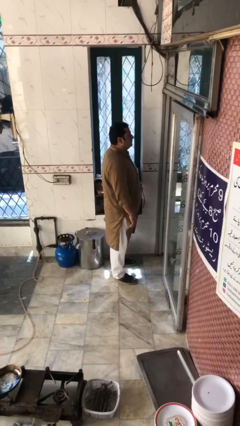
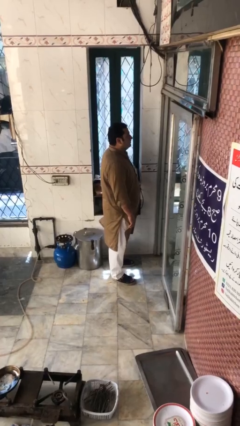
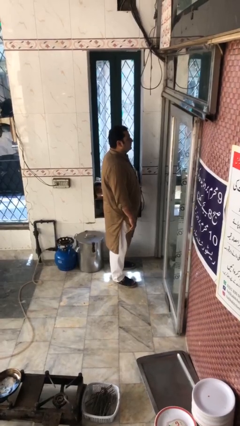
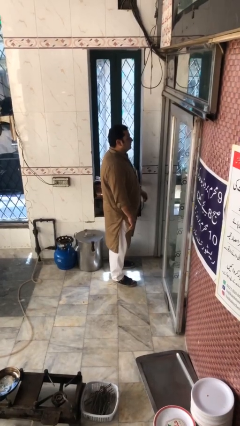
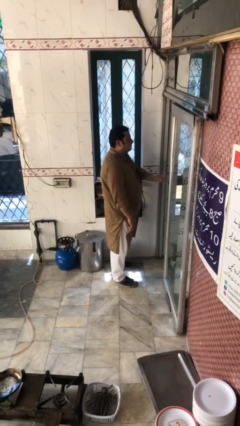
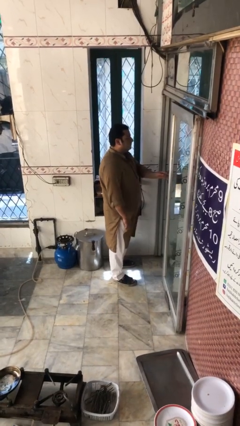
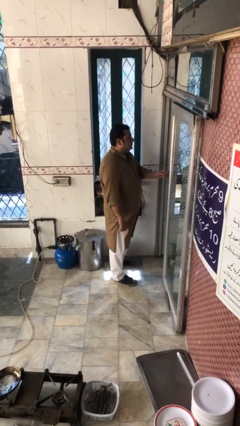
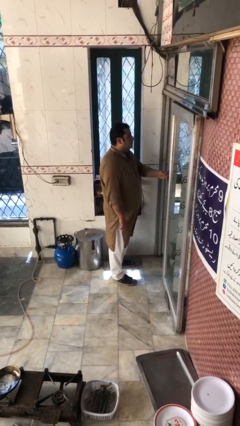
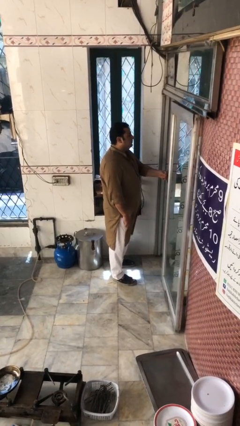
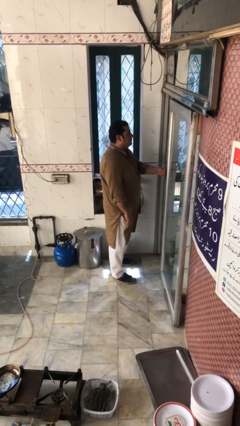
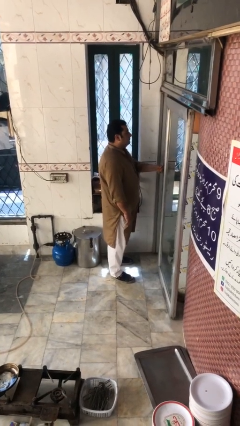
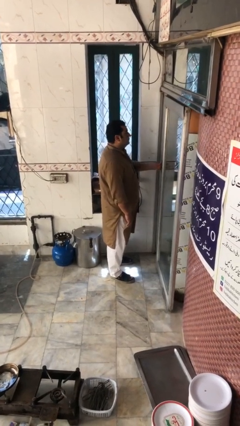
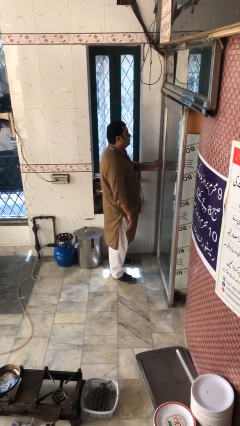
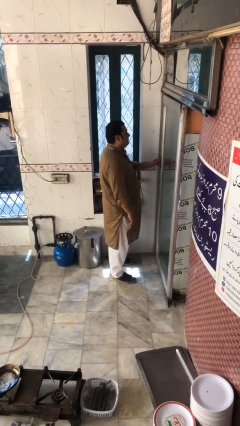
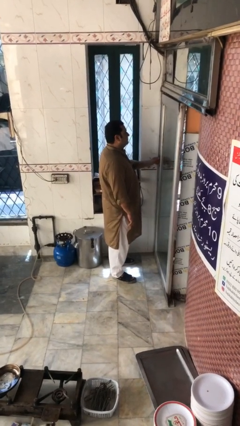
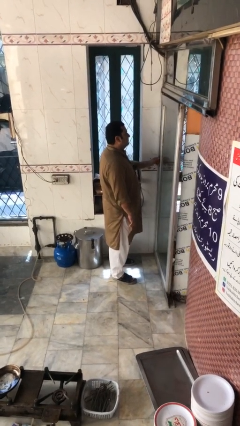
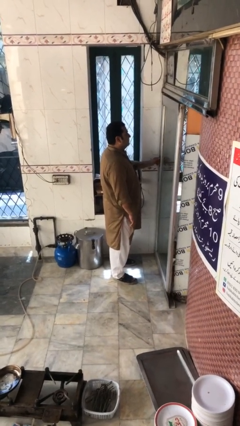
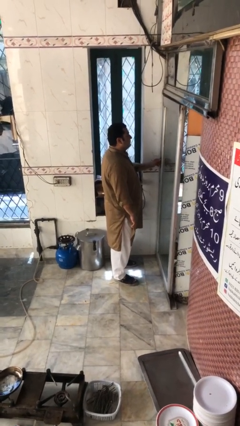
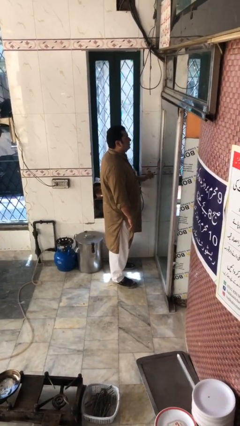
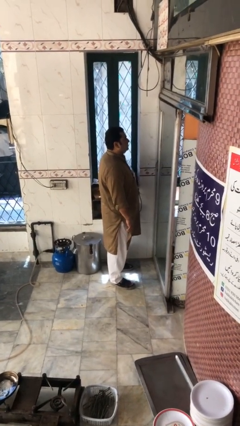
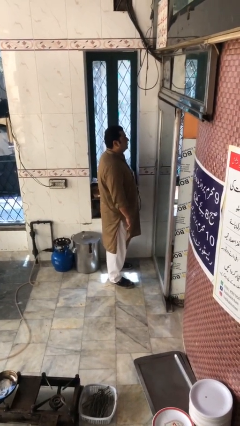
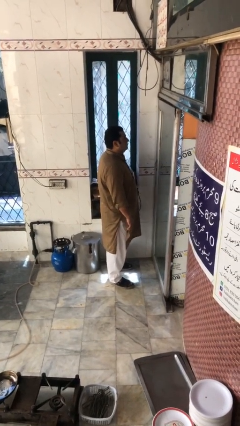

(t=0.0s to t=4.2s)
person closes sliding door

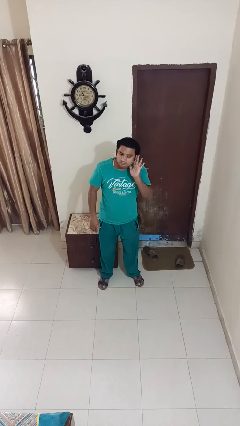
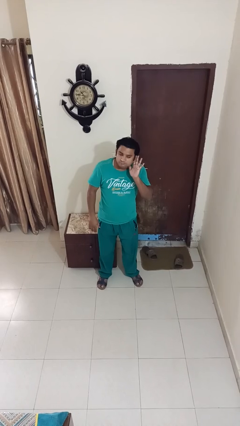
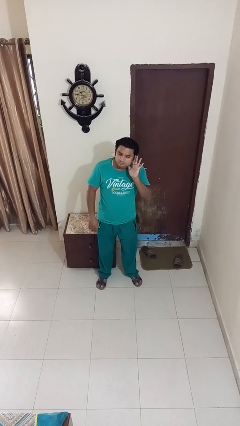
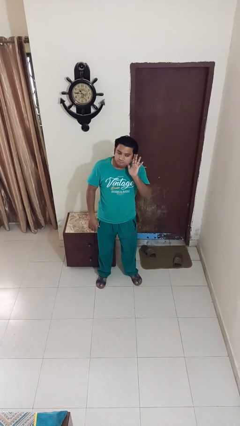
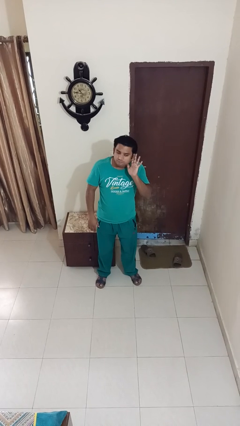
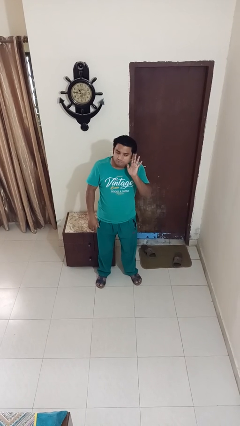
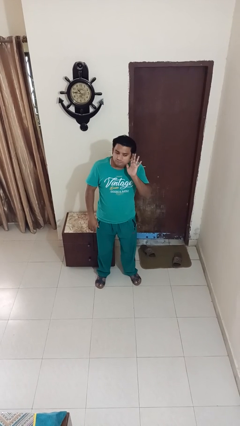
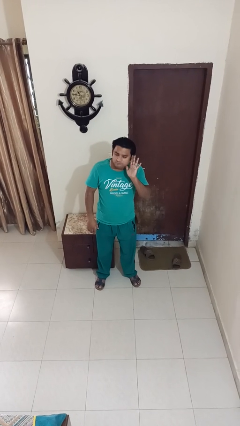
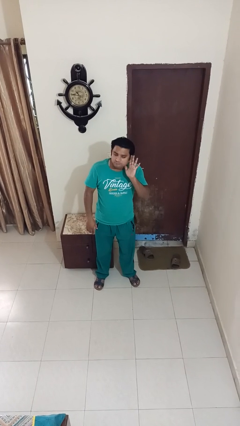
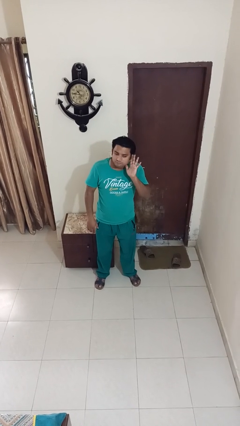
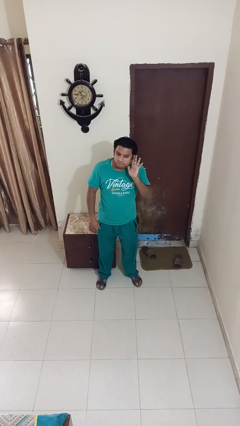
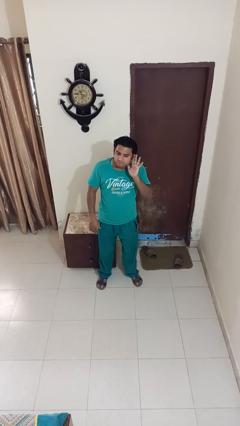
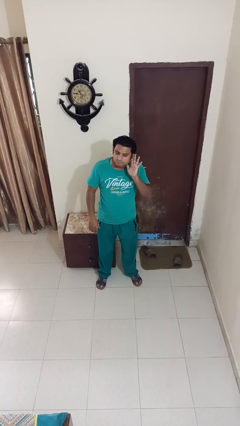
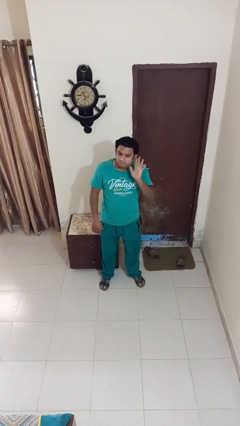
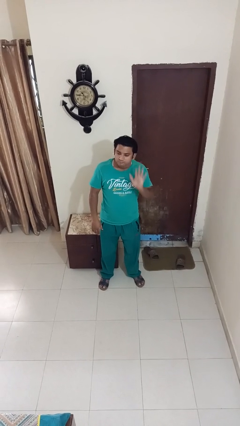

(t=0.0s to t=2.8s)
person gestures listen closely

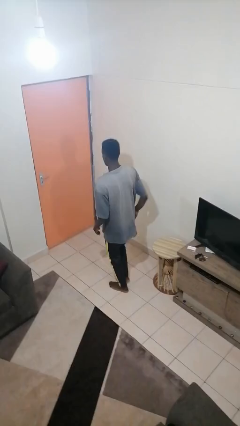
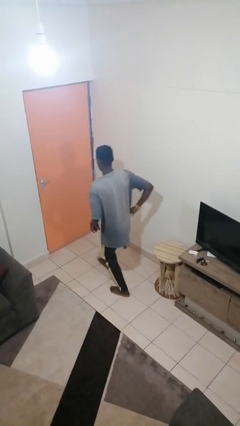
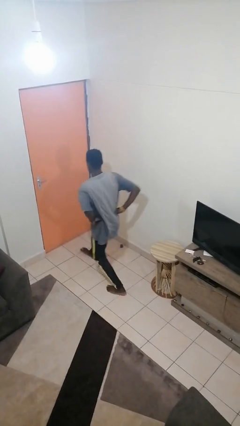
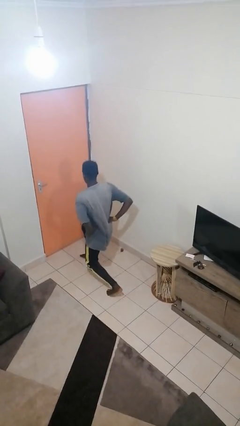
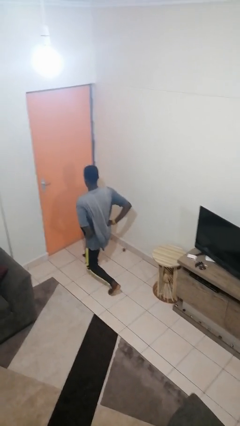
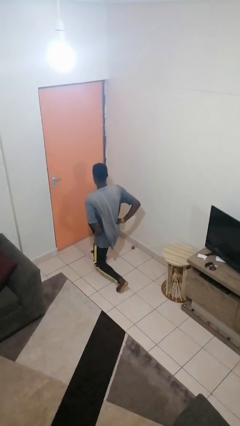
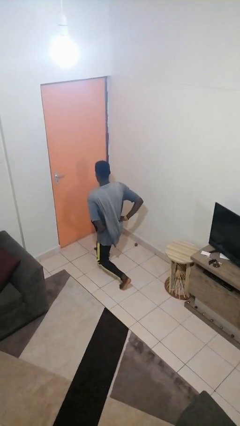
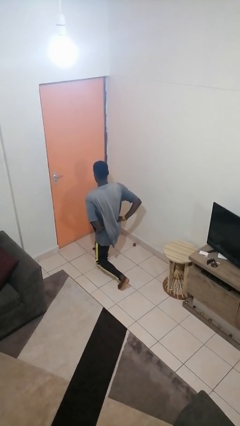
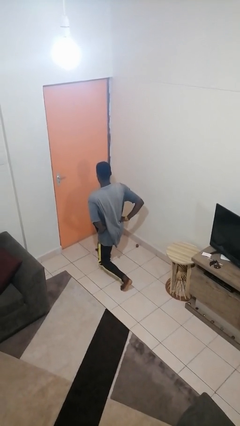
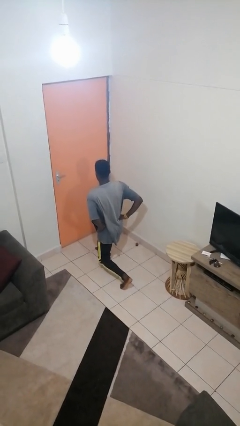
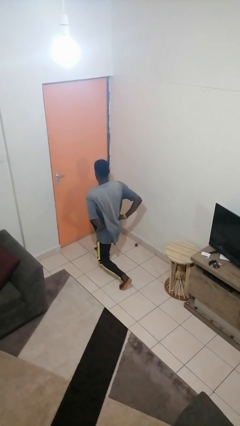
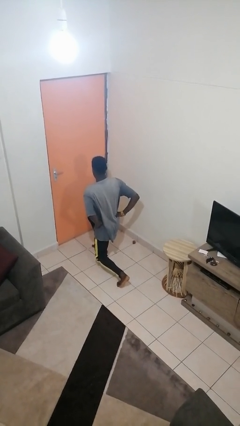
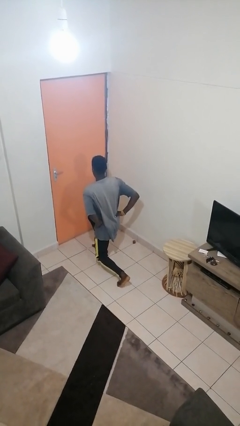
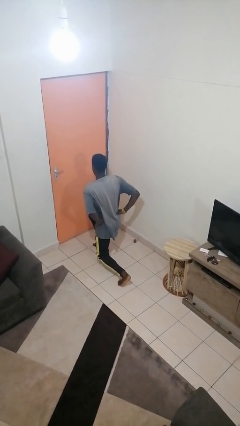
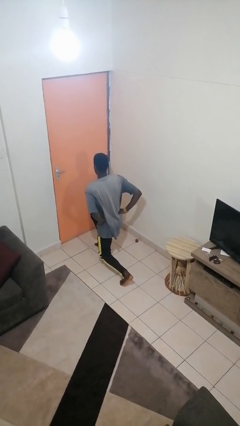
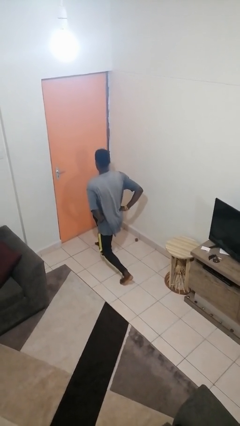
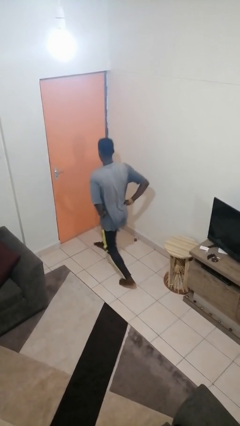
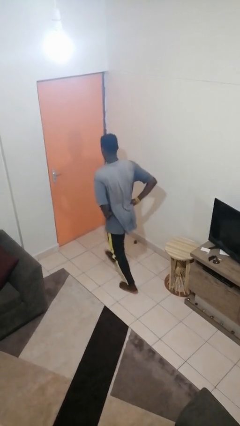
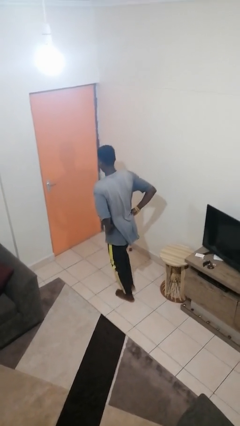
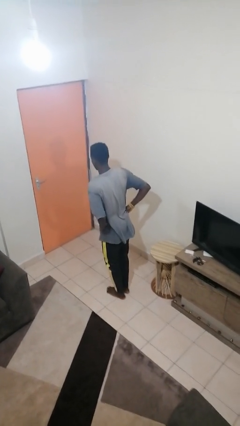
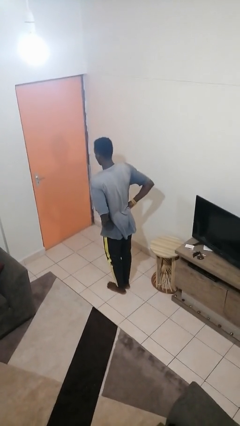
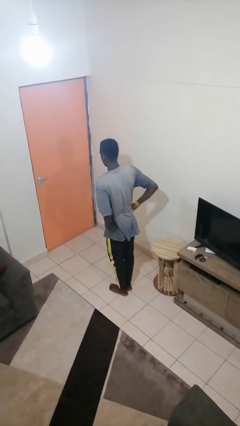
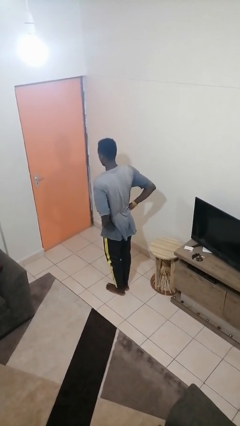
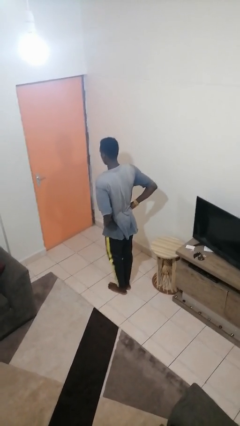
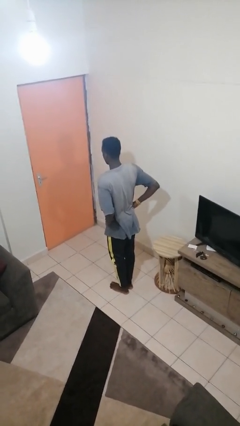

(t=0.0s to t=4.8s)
person exercises with lunges

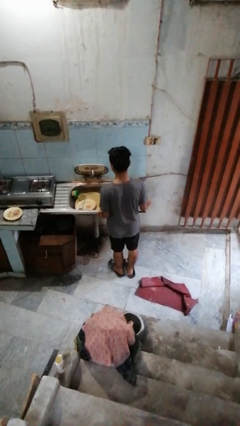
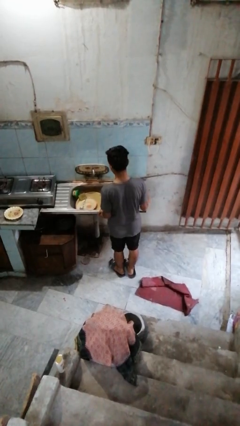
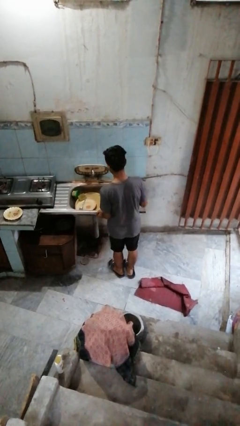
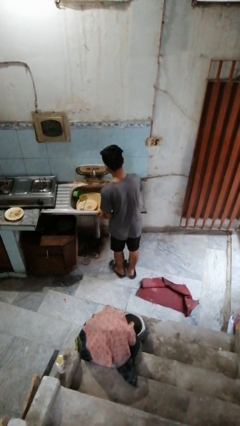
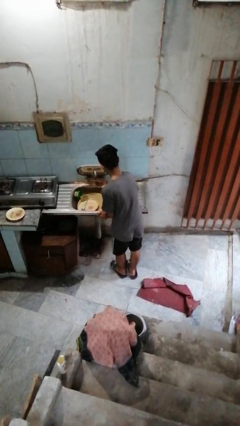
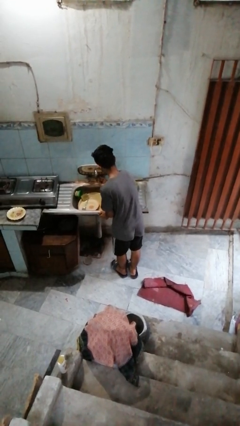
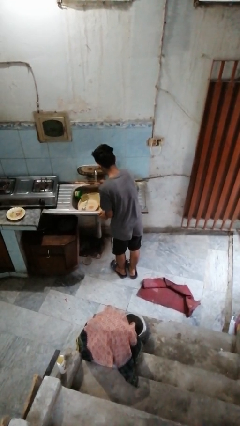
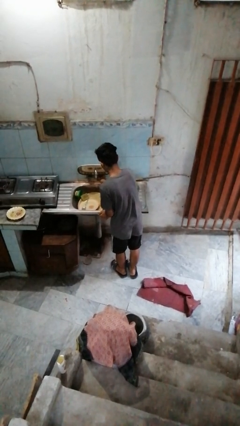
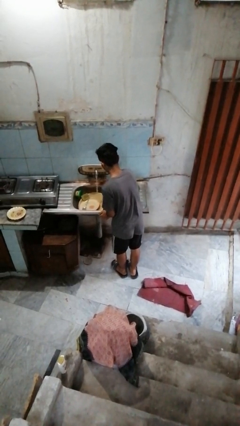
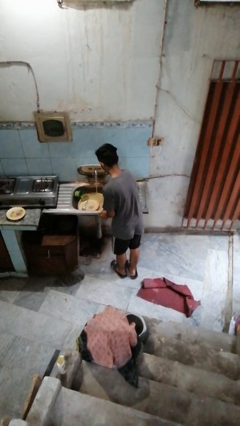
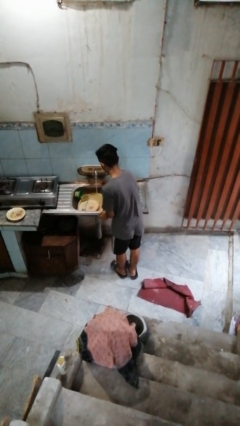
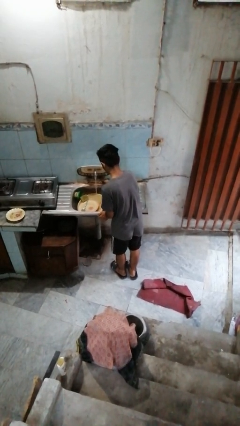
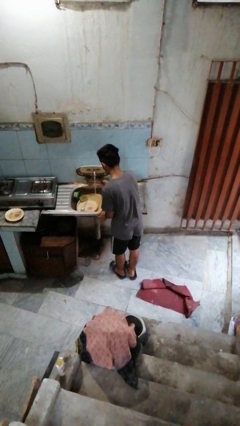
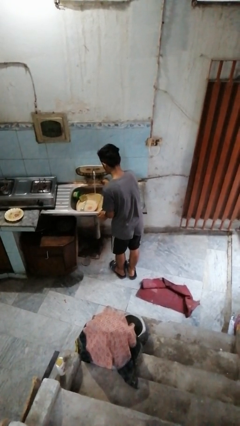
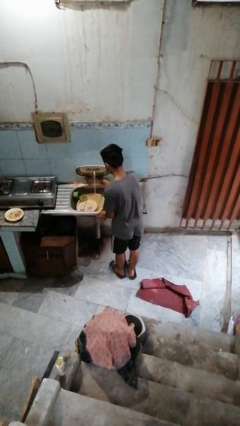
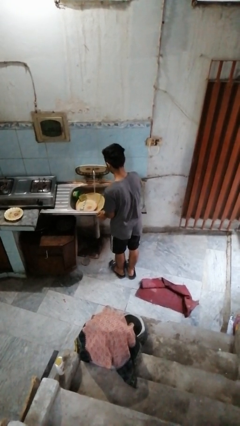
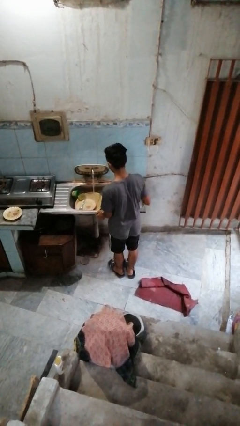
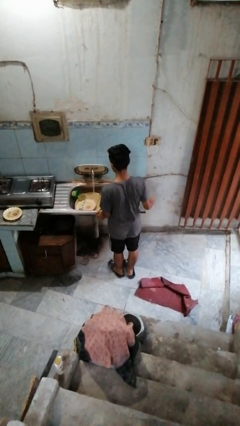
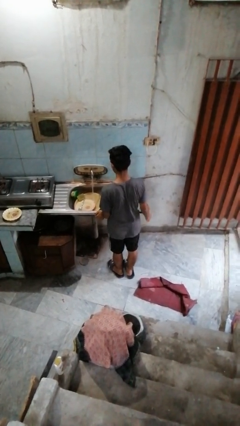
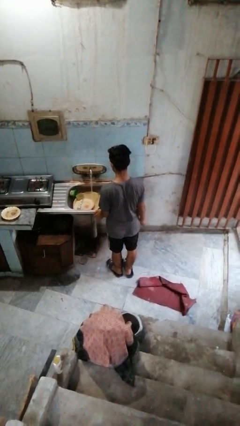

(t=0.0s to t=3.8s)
person turns on faucet

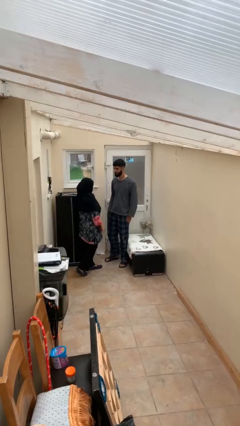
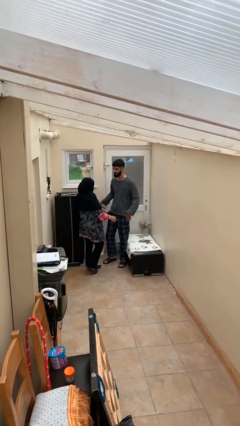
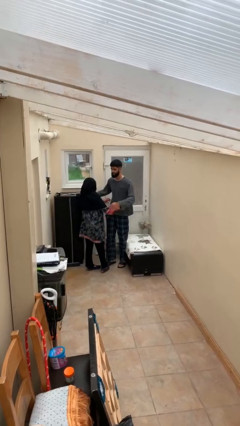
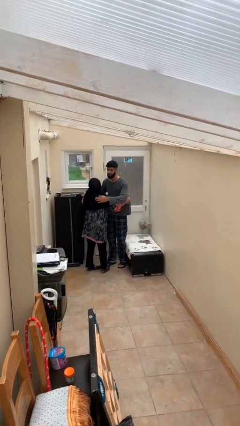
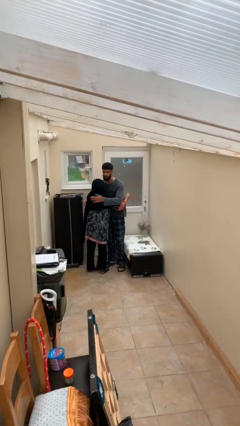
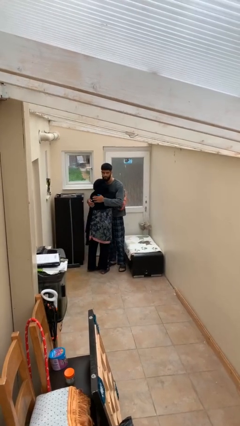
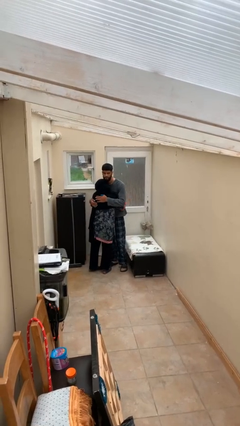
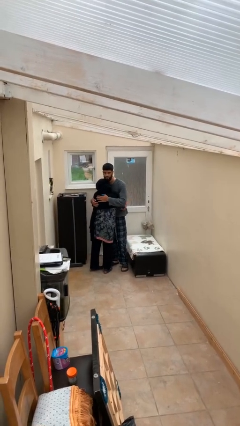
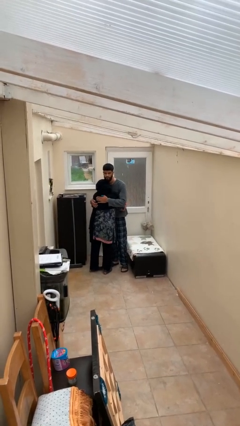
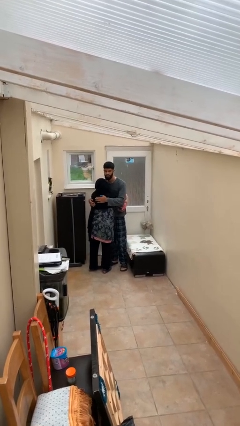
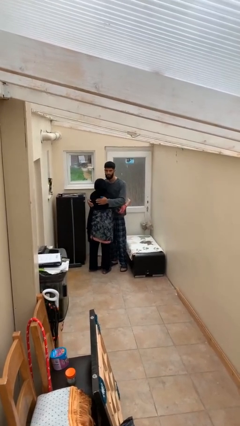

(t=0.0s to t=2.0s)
person embraces person
